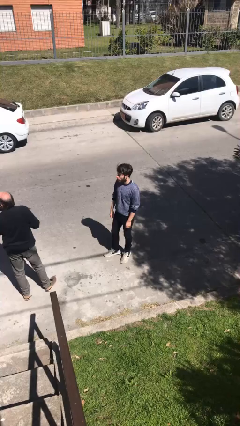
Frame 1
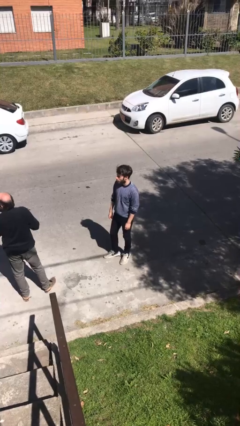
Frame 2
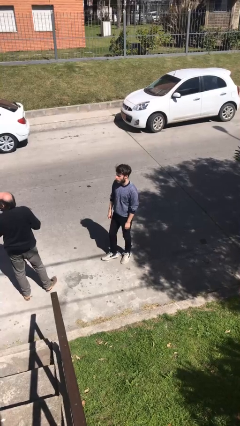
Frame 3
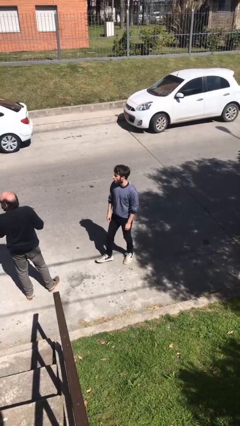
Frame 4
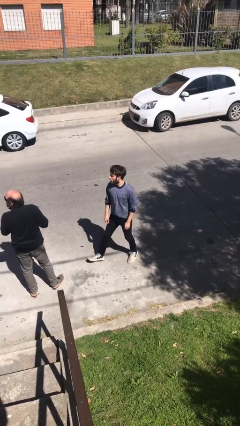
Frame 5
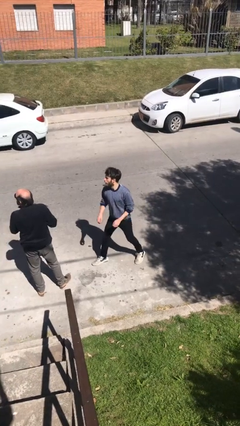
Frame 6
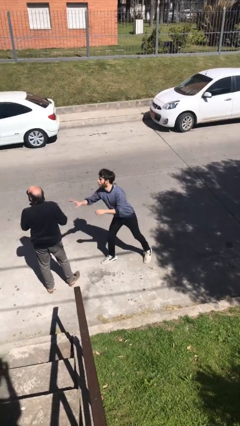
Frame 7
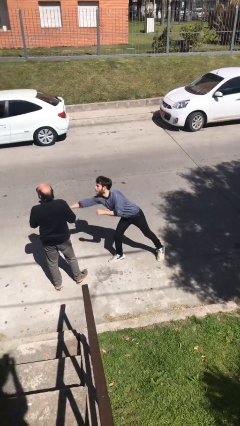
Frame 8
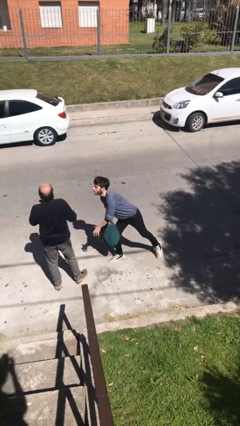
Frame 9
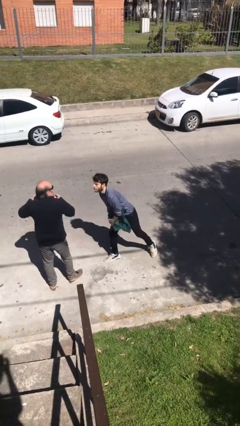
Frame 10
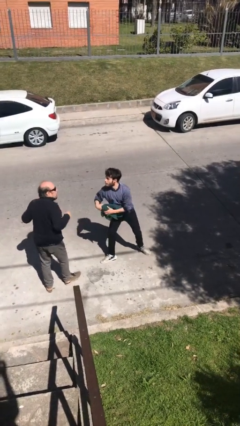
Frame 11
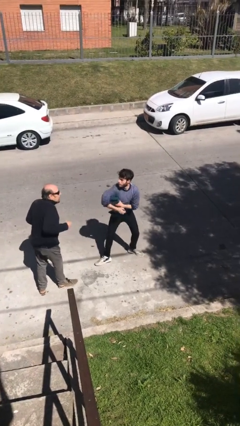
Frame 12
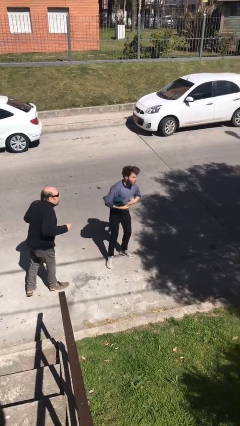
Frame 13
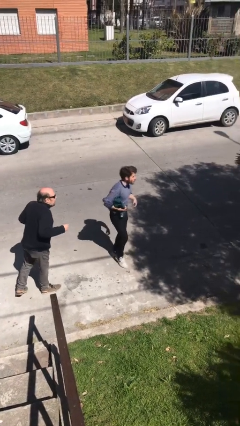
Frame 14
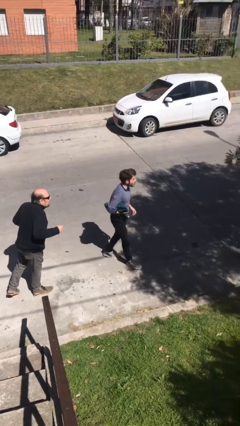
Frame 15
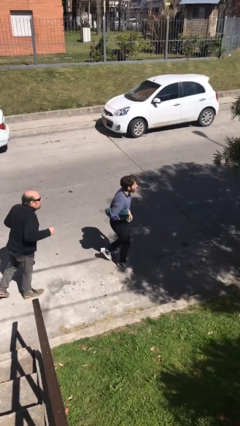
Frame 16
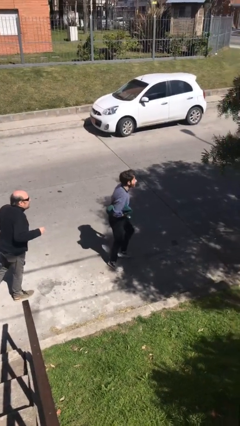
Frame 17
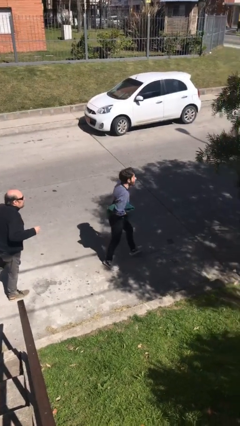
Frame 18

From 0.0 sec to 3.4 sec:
person steals object from person

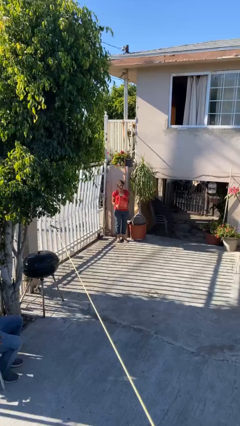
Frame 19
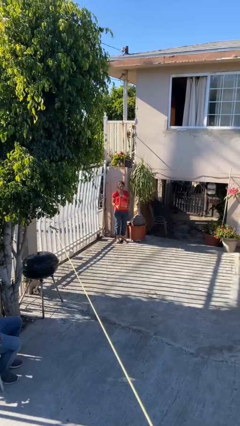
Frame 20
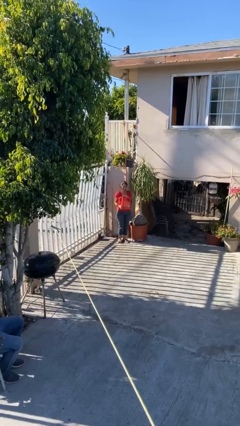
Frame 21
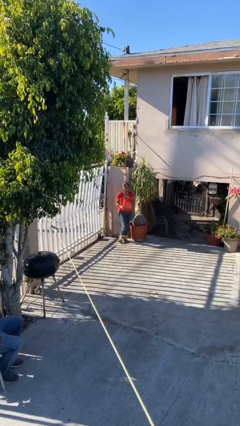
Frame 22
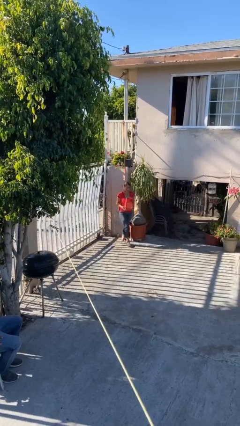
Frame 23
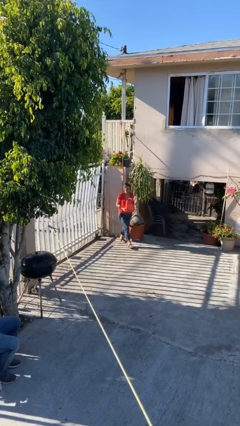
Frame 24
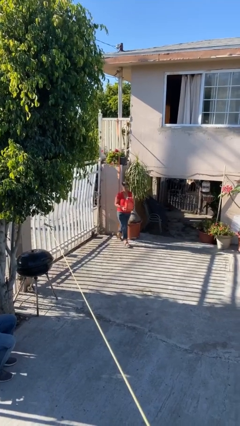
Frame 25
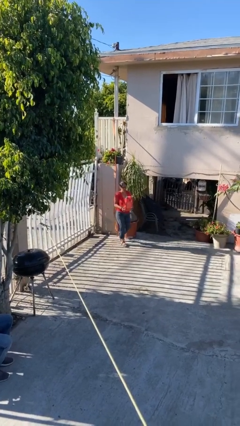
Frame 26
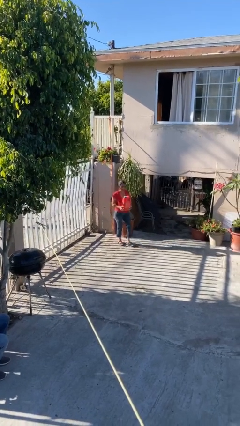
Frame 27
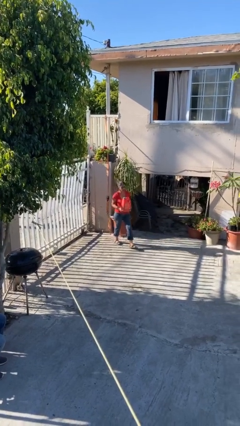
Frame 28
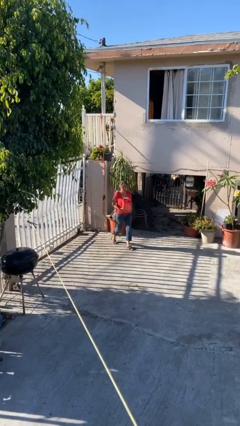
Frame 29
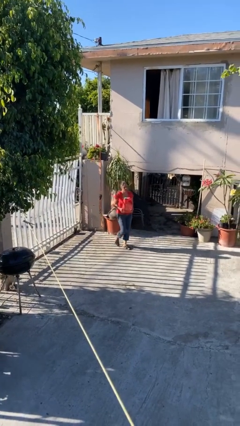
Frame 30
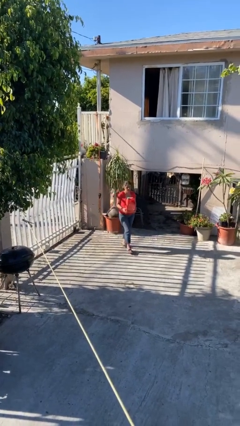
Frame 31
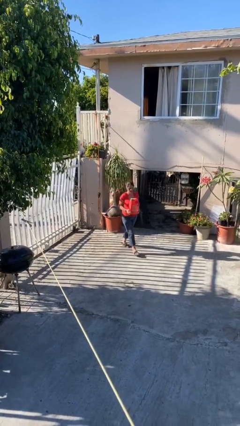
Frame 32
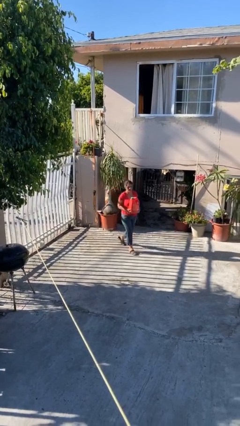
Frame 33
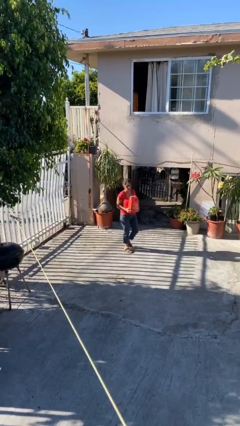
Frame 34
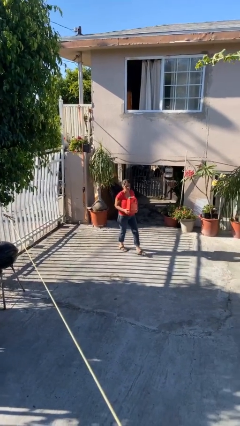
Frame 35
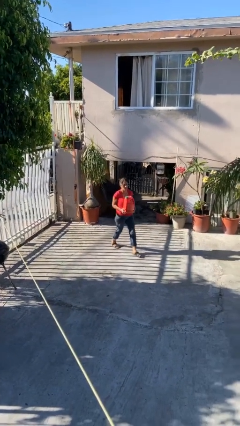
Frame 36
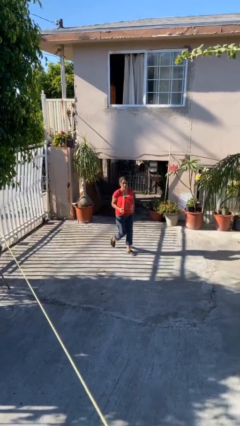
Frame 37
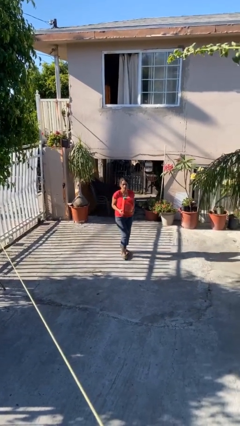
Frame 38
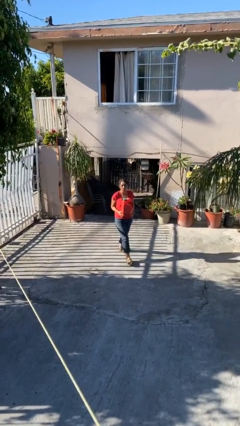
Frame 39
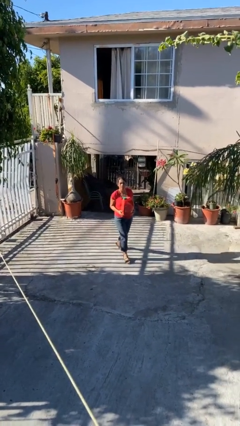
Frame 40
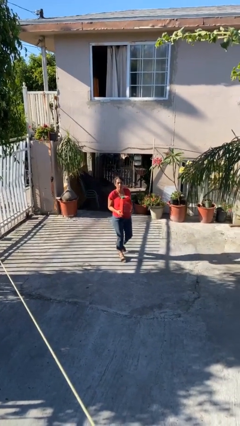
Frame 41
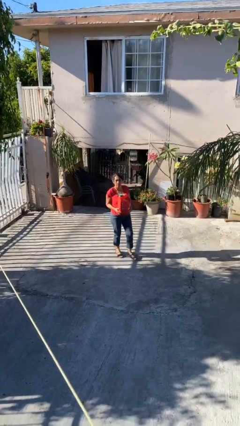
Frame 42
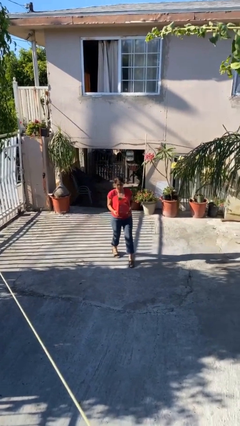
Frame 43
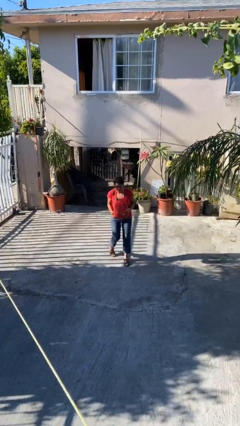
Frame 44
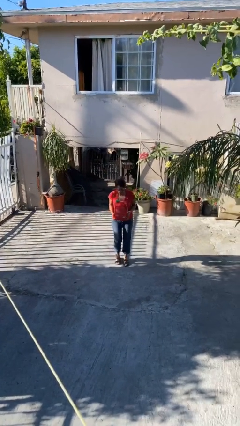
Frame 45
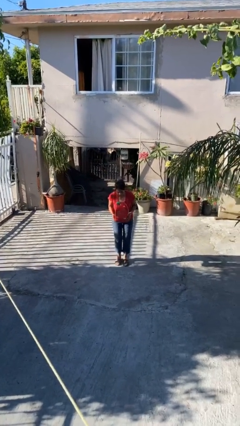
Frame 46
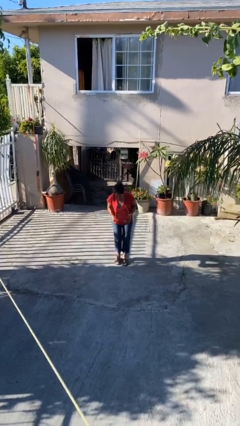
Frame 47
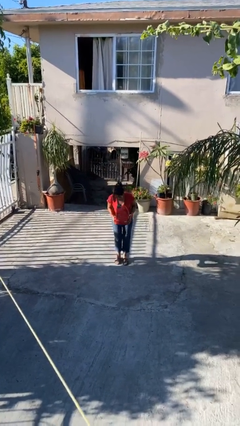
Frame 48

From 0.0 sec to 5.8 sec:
person carries heavy object

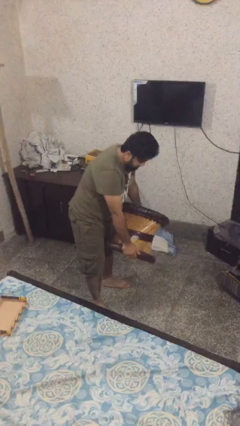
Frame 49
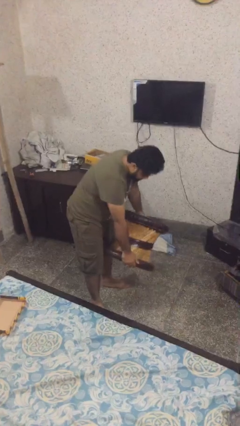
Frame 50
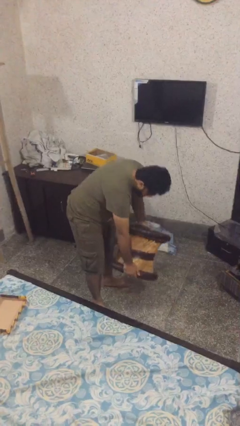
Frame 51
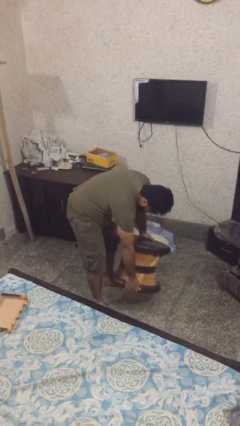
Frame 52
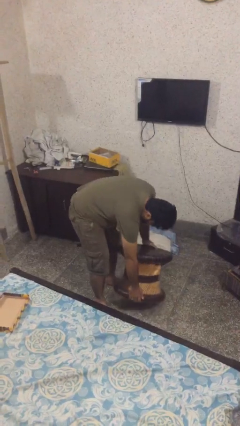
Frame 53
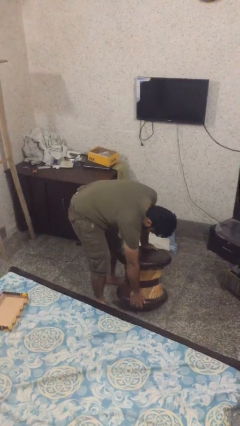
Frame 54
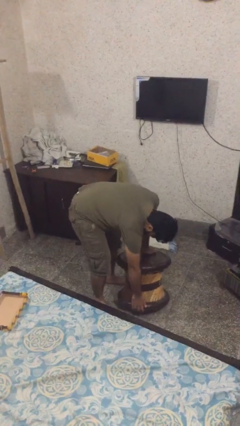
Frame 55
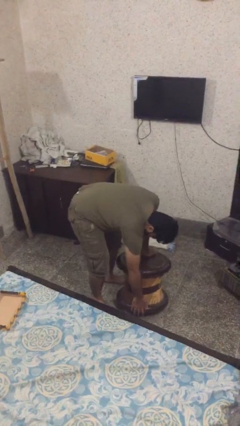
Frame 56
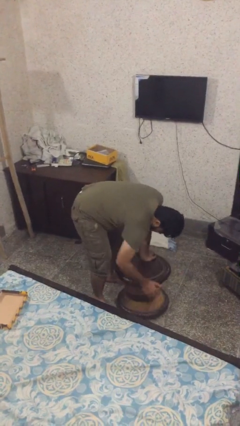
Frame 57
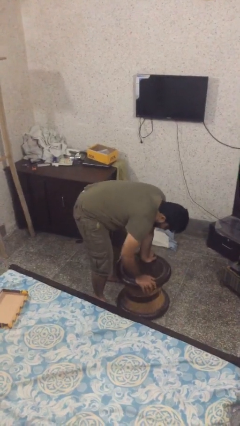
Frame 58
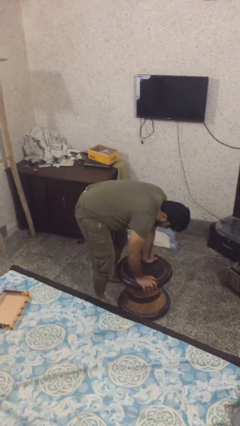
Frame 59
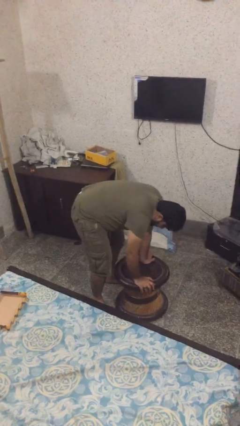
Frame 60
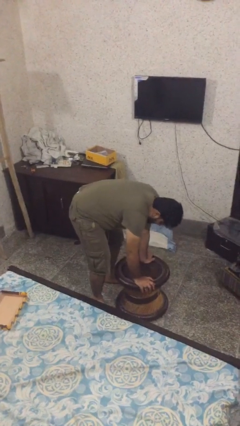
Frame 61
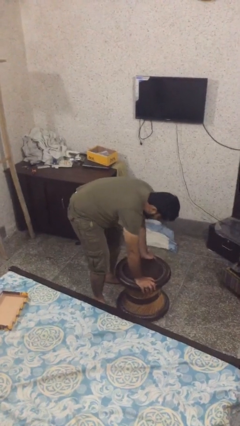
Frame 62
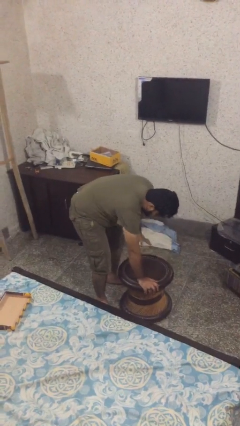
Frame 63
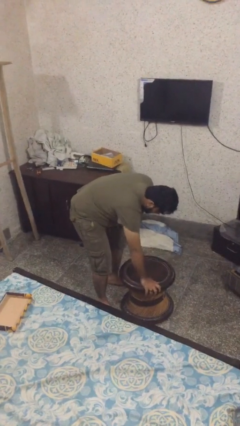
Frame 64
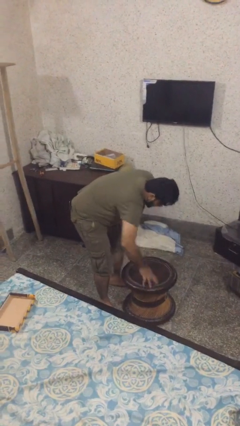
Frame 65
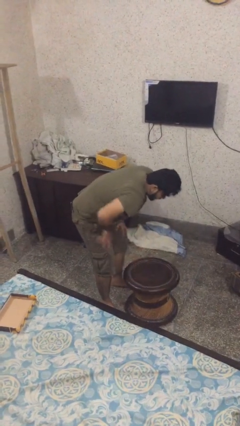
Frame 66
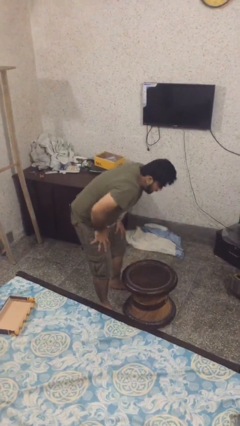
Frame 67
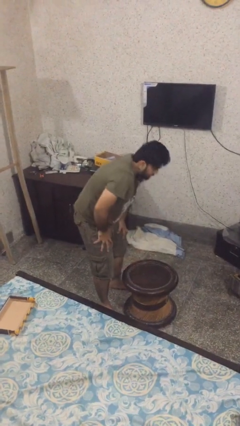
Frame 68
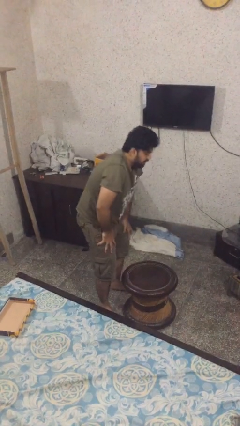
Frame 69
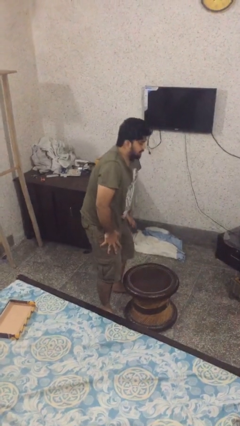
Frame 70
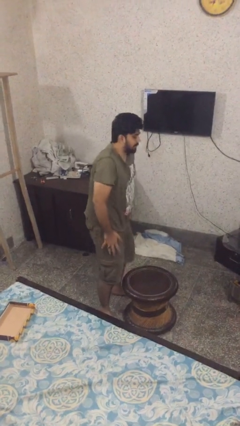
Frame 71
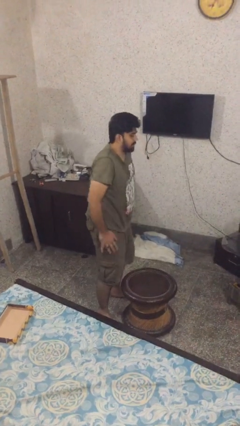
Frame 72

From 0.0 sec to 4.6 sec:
person puts down object on floor

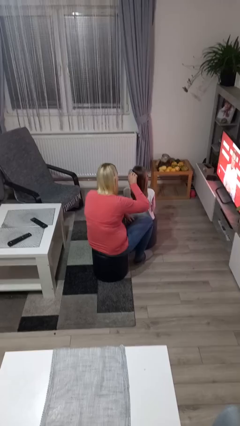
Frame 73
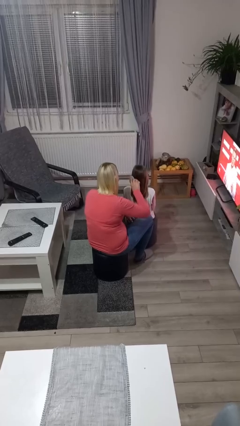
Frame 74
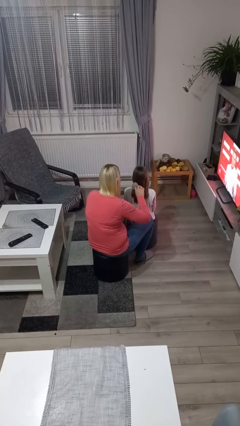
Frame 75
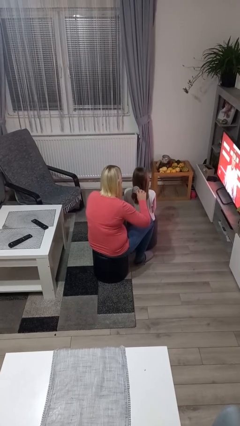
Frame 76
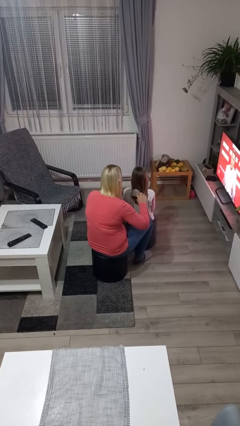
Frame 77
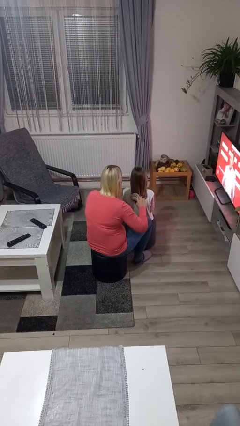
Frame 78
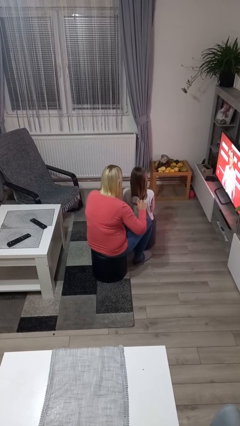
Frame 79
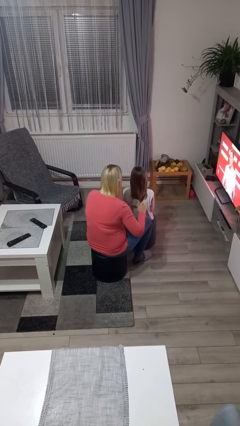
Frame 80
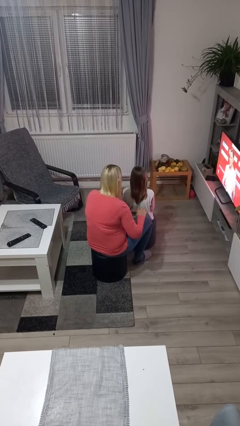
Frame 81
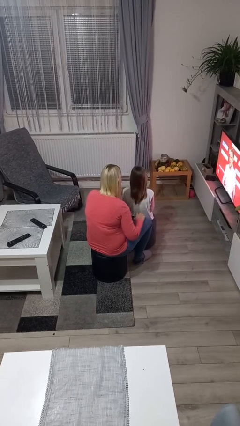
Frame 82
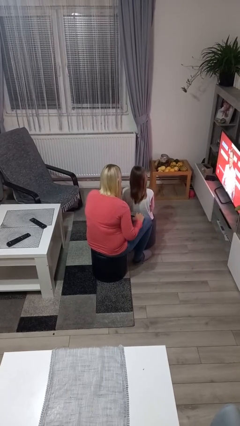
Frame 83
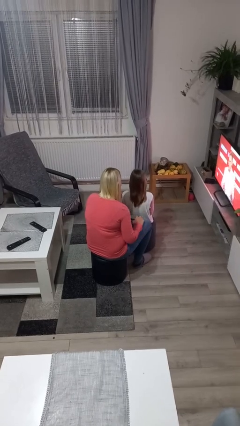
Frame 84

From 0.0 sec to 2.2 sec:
person brushes hair of person

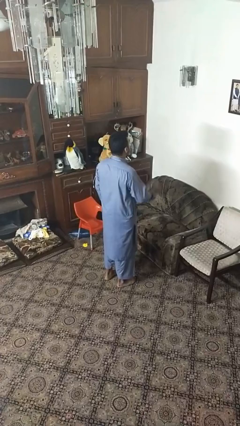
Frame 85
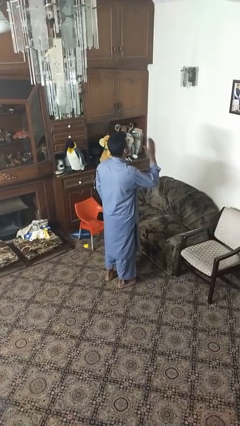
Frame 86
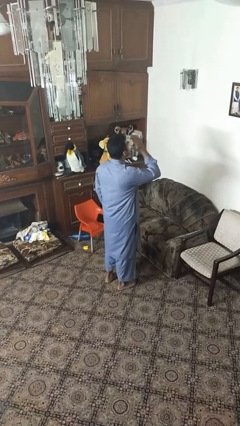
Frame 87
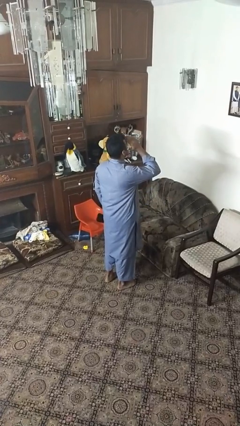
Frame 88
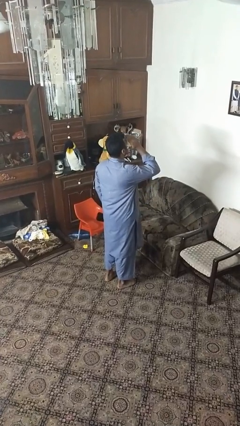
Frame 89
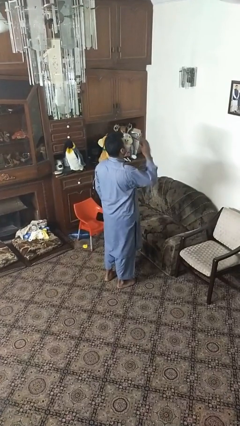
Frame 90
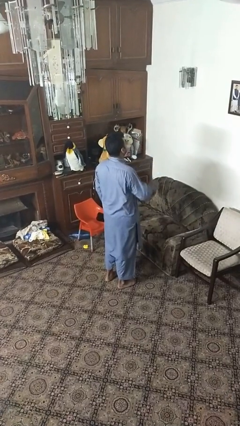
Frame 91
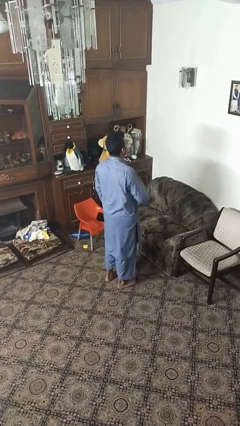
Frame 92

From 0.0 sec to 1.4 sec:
person salutes

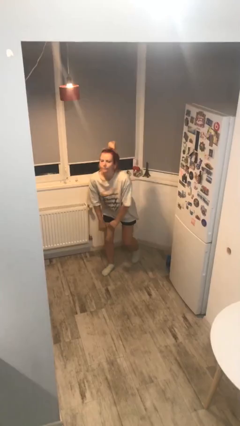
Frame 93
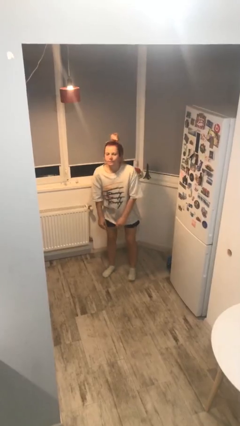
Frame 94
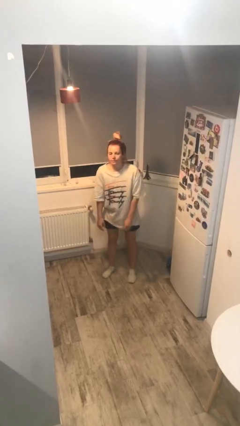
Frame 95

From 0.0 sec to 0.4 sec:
person stands up from floor
